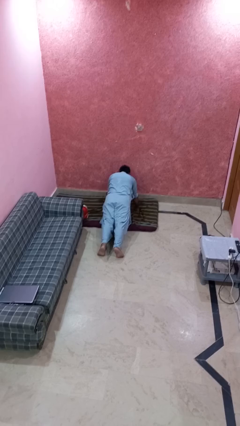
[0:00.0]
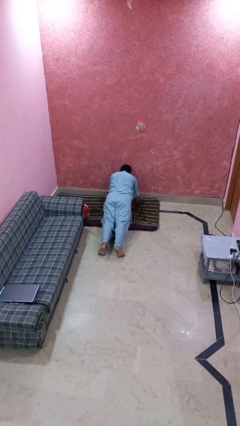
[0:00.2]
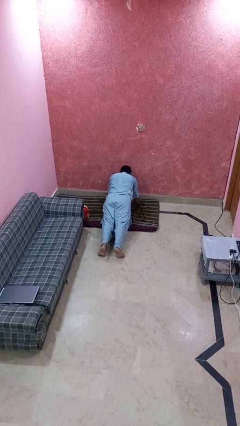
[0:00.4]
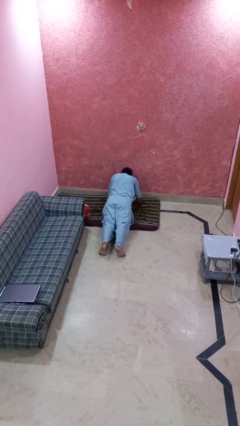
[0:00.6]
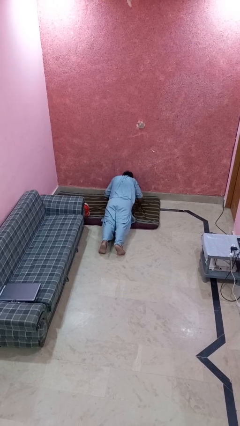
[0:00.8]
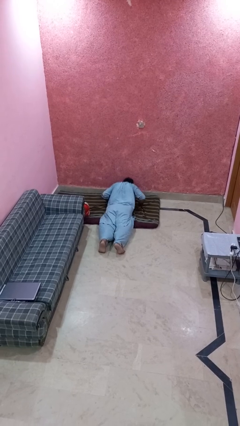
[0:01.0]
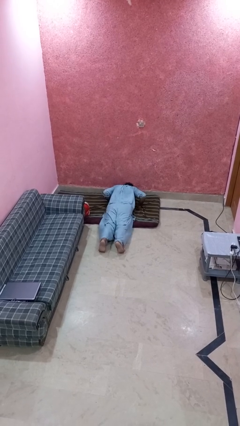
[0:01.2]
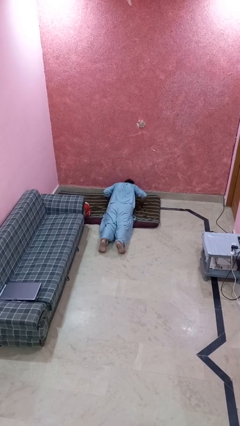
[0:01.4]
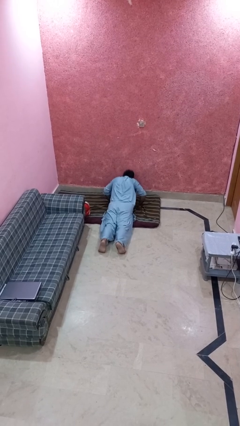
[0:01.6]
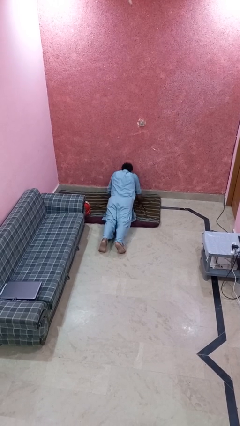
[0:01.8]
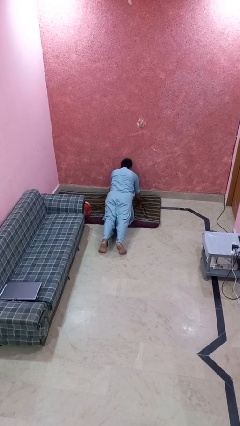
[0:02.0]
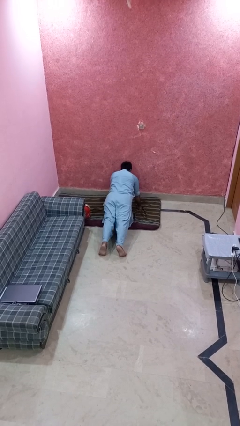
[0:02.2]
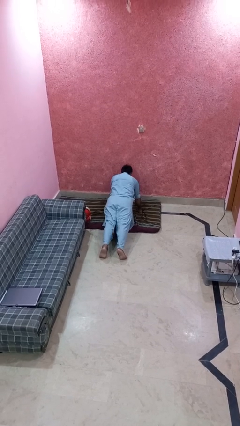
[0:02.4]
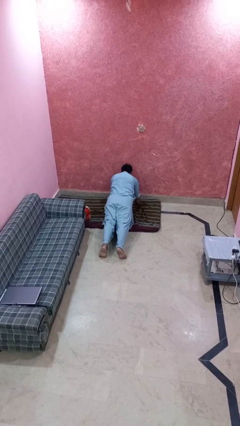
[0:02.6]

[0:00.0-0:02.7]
person exercises with pushup

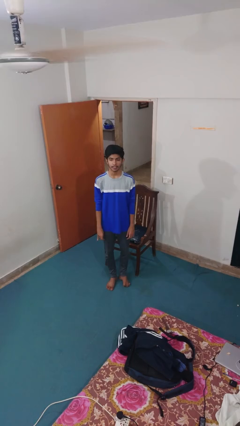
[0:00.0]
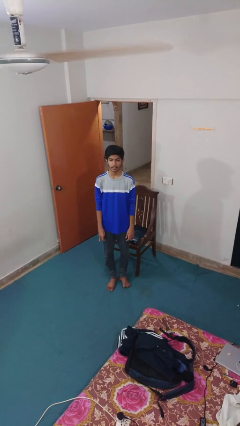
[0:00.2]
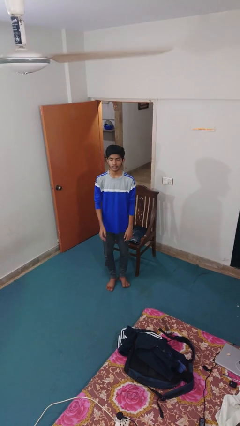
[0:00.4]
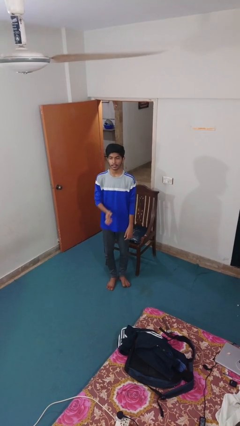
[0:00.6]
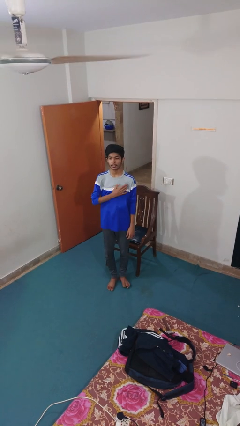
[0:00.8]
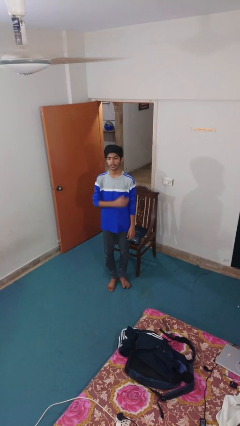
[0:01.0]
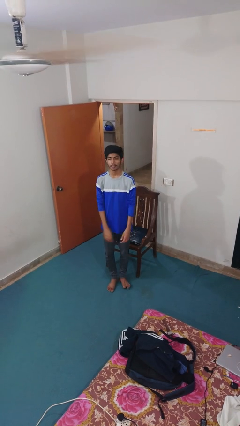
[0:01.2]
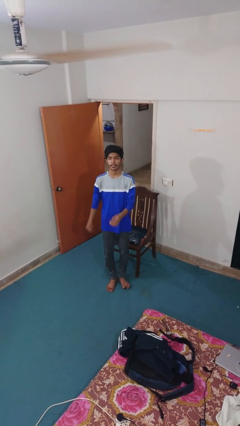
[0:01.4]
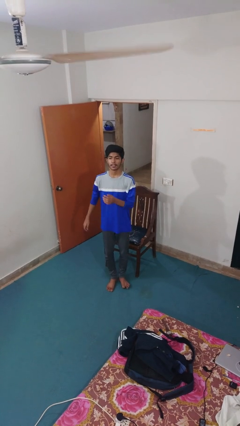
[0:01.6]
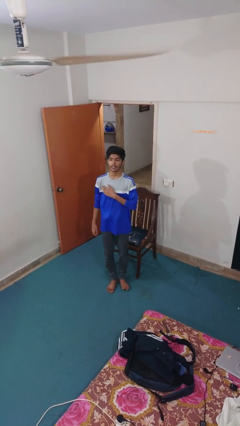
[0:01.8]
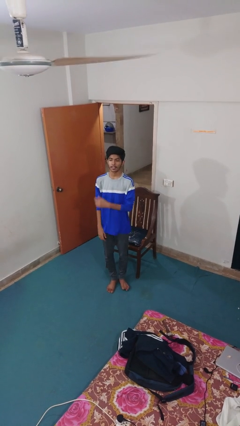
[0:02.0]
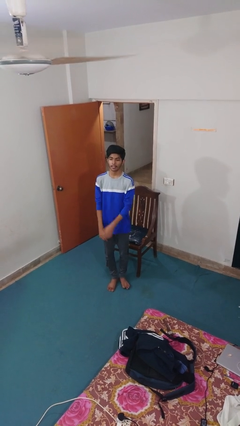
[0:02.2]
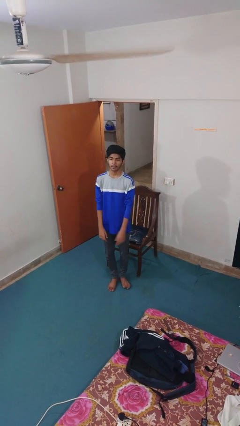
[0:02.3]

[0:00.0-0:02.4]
person drums on chest

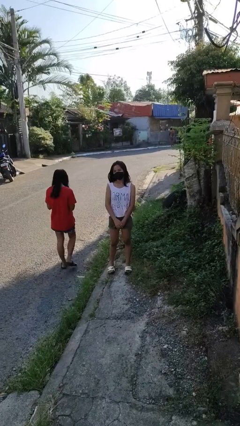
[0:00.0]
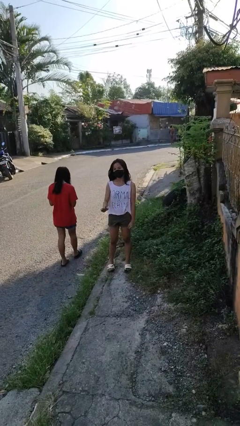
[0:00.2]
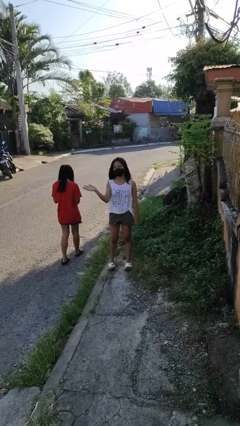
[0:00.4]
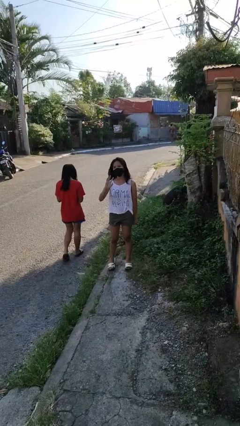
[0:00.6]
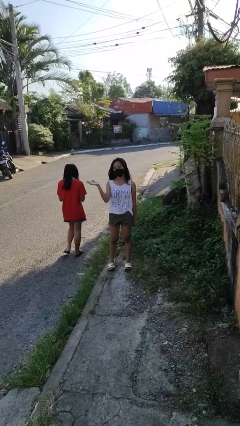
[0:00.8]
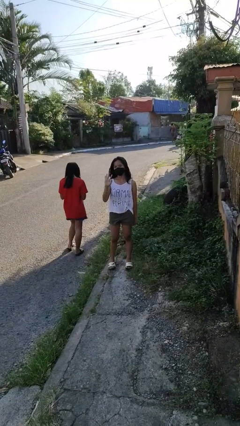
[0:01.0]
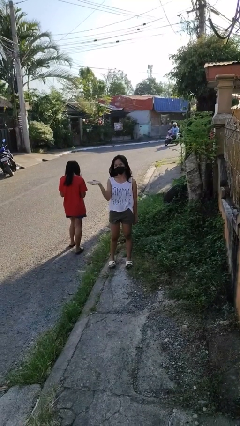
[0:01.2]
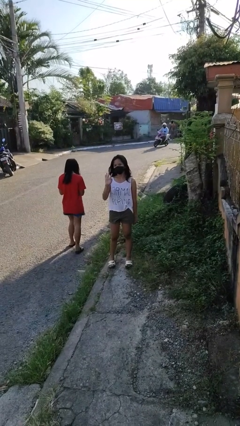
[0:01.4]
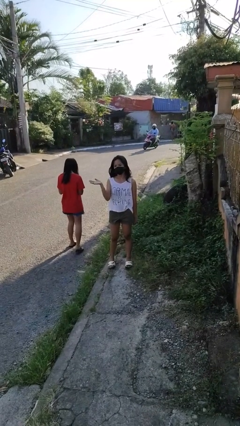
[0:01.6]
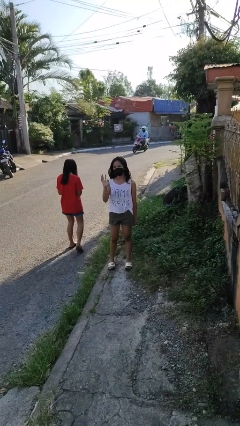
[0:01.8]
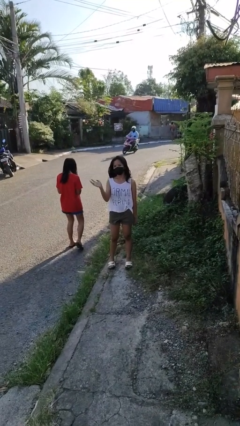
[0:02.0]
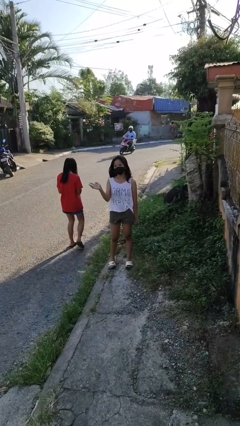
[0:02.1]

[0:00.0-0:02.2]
person waves at person

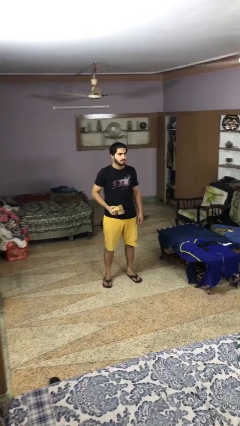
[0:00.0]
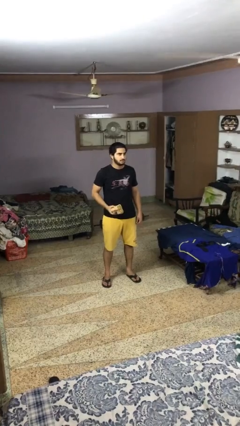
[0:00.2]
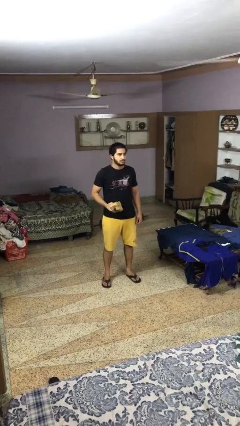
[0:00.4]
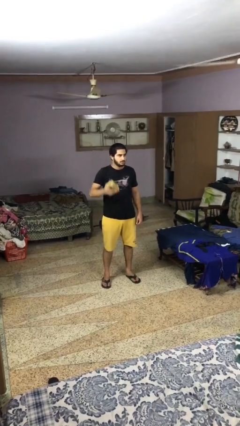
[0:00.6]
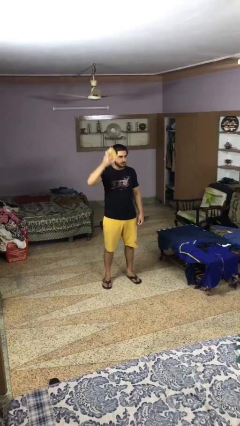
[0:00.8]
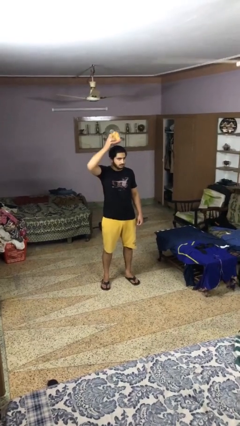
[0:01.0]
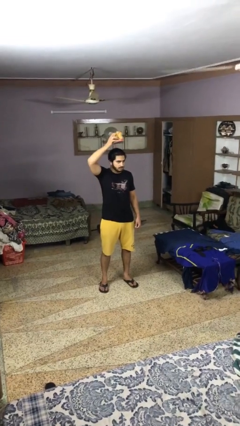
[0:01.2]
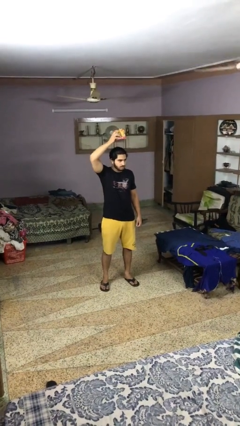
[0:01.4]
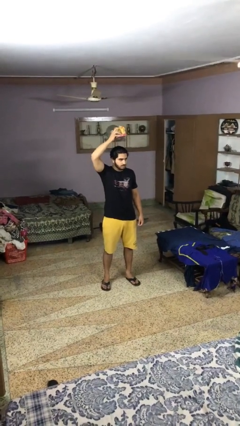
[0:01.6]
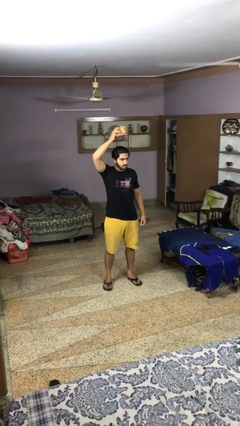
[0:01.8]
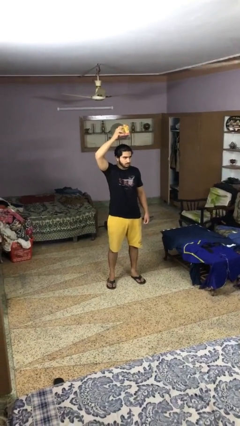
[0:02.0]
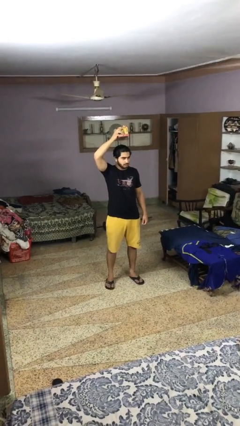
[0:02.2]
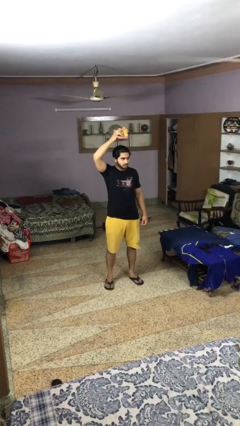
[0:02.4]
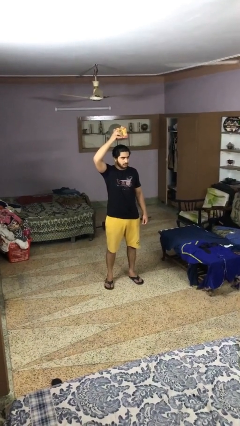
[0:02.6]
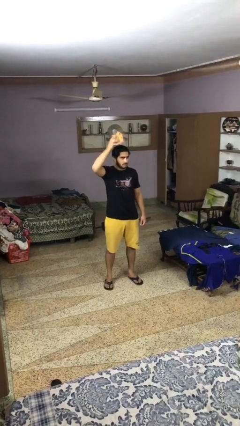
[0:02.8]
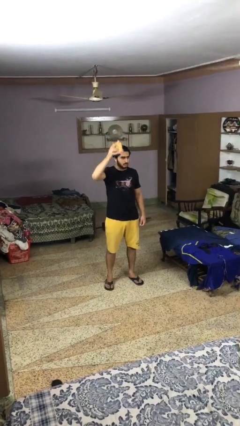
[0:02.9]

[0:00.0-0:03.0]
person holds object above head

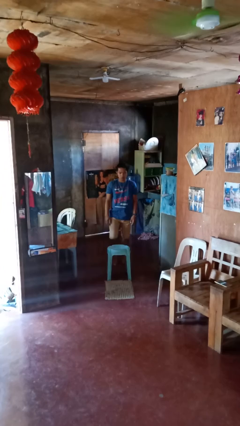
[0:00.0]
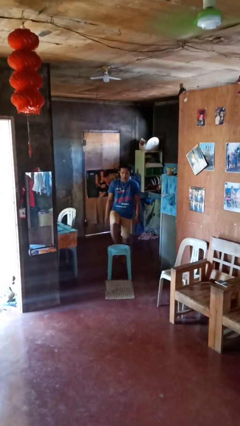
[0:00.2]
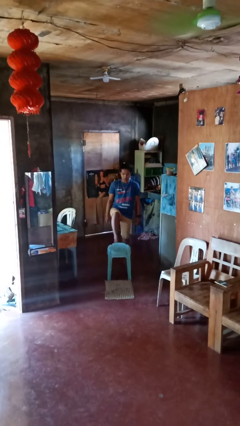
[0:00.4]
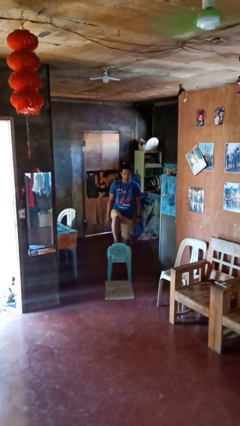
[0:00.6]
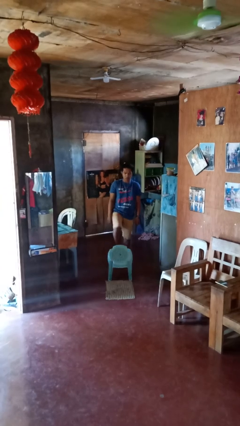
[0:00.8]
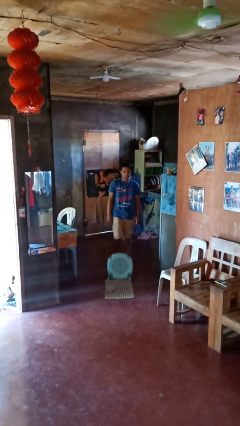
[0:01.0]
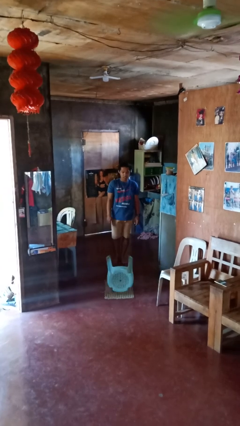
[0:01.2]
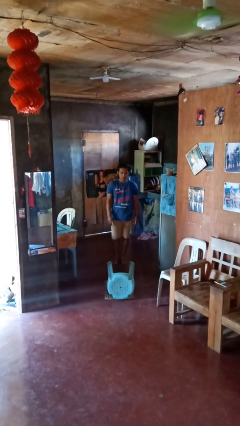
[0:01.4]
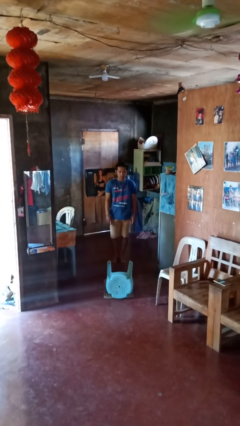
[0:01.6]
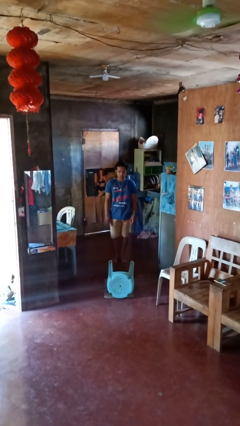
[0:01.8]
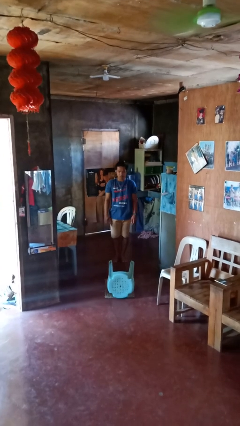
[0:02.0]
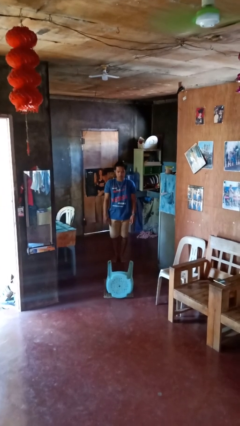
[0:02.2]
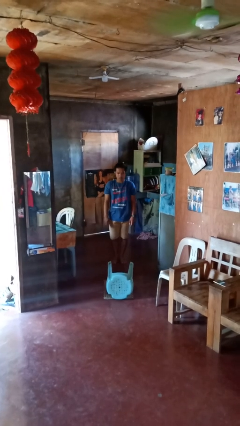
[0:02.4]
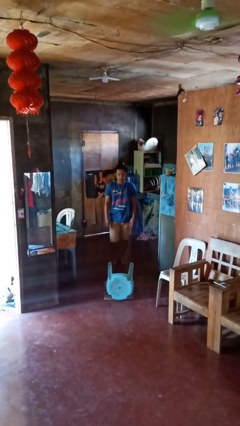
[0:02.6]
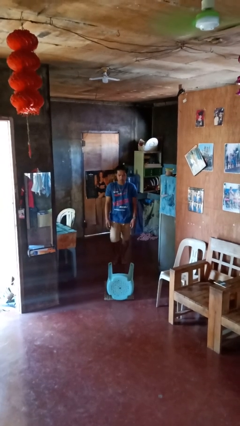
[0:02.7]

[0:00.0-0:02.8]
person knocks over furniture

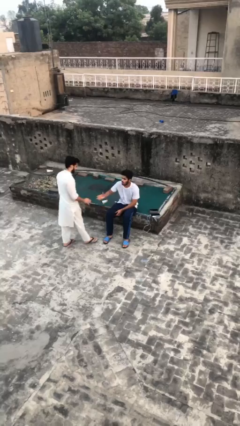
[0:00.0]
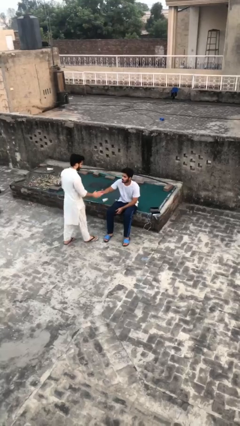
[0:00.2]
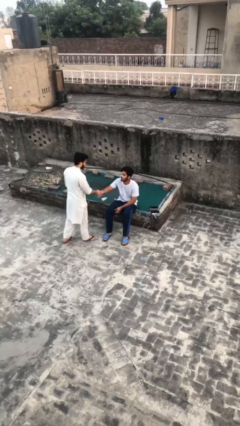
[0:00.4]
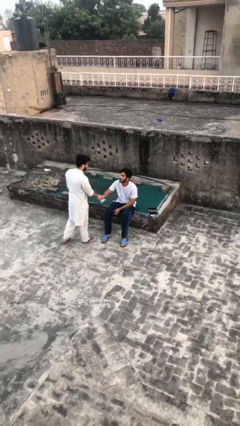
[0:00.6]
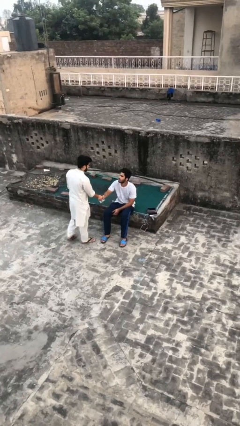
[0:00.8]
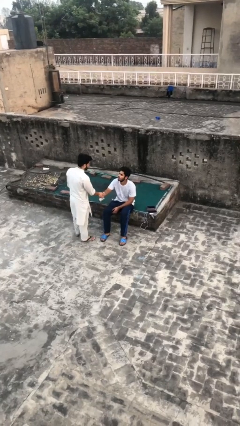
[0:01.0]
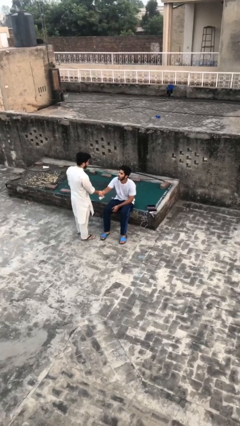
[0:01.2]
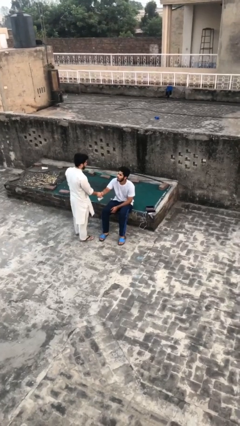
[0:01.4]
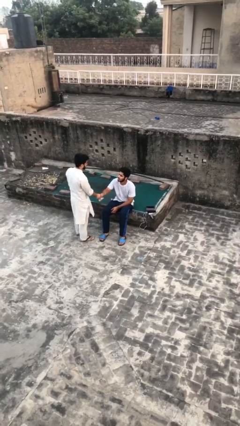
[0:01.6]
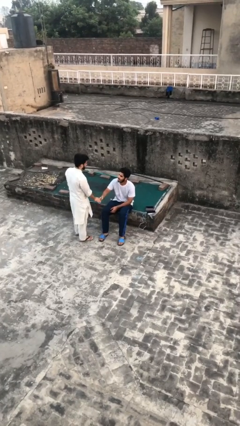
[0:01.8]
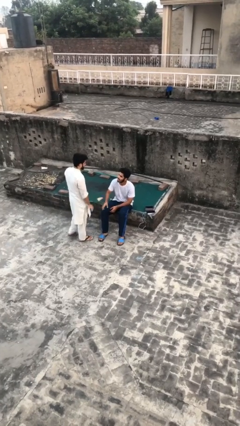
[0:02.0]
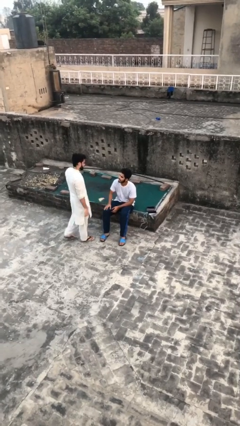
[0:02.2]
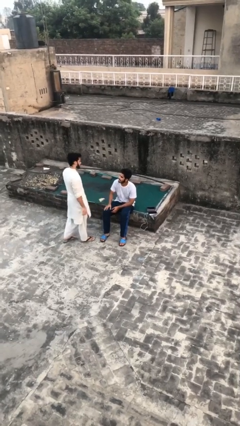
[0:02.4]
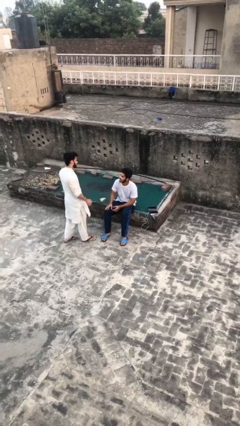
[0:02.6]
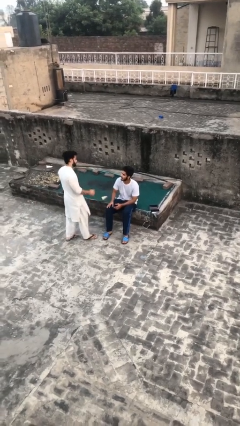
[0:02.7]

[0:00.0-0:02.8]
person shakes hand

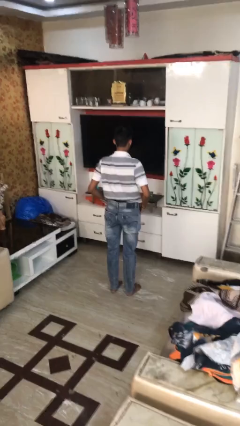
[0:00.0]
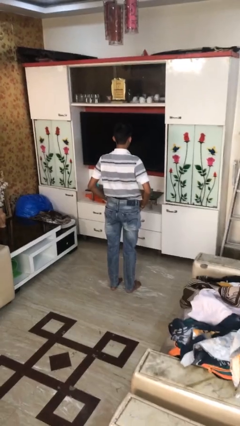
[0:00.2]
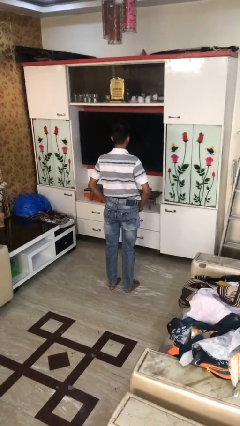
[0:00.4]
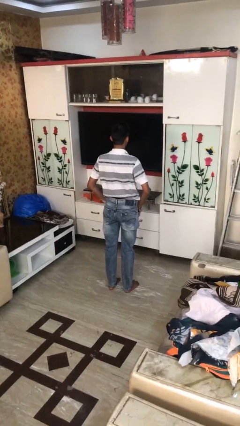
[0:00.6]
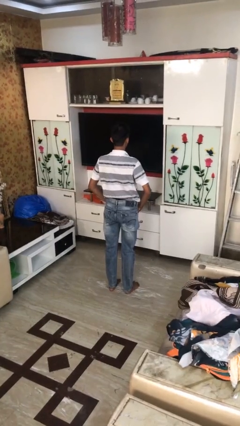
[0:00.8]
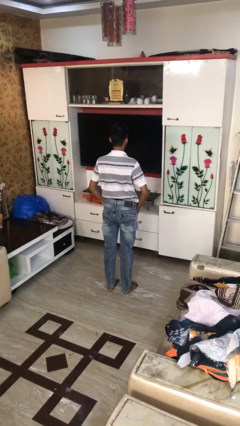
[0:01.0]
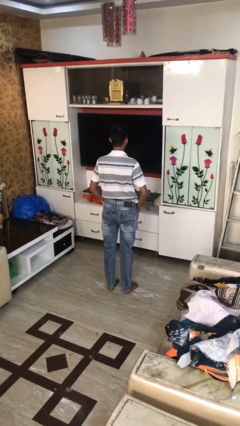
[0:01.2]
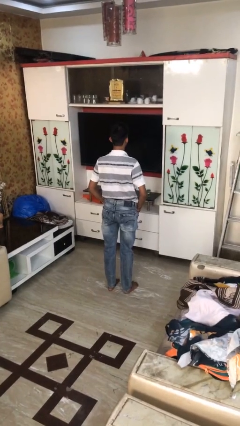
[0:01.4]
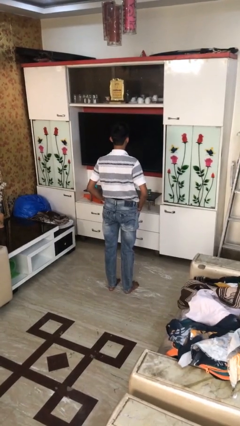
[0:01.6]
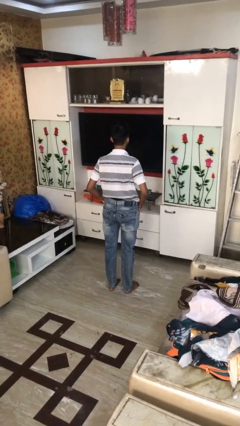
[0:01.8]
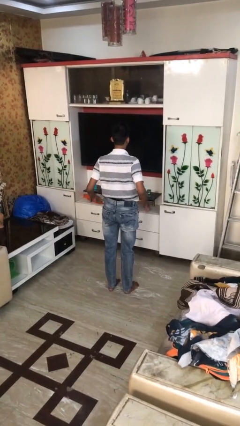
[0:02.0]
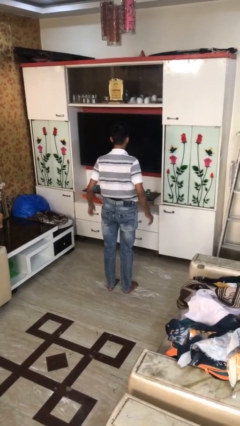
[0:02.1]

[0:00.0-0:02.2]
person puts hands in back pockets
